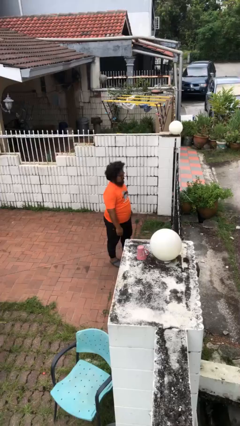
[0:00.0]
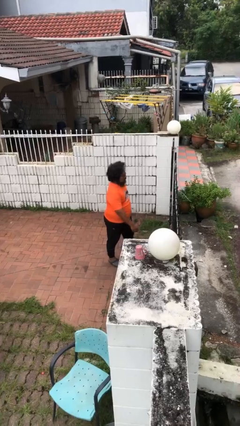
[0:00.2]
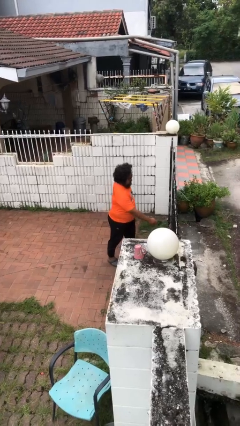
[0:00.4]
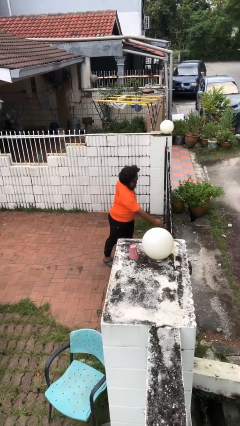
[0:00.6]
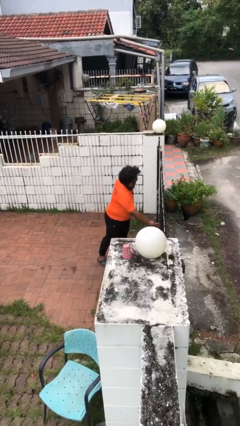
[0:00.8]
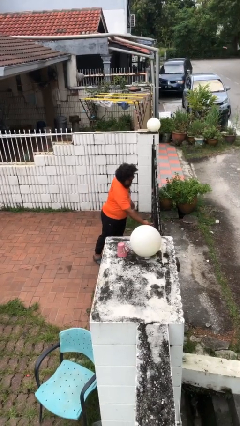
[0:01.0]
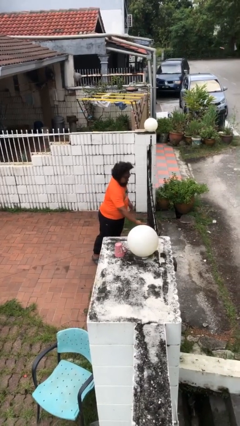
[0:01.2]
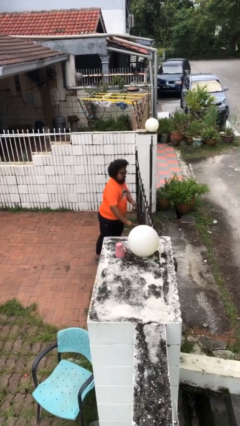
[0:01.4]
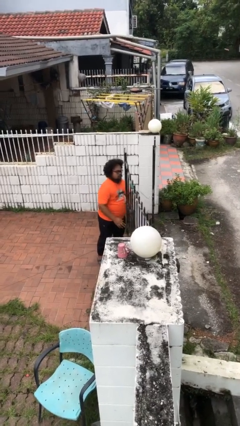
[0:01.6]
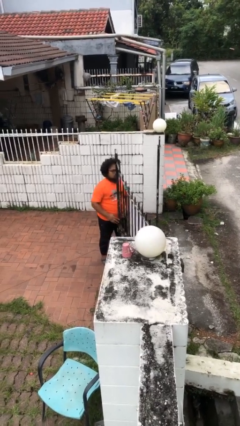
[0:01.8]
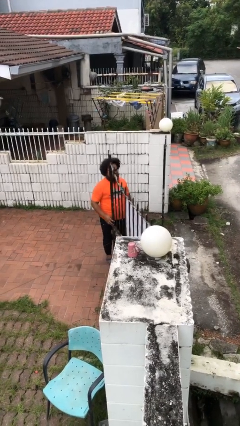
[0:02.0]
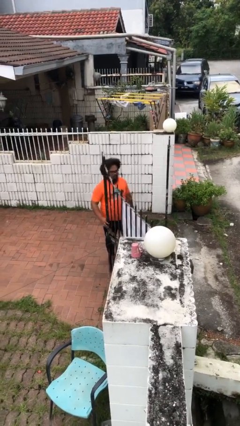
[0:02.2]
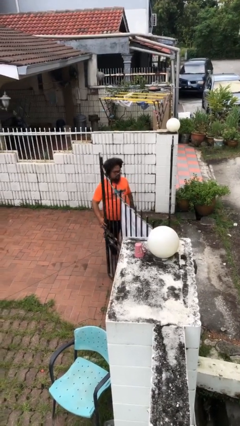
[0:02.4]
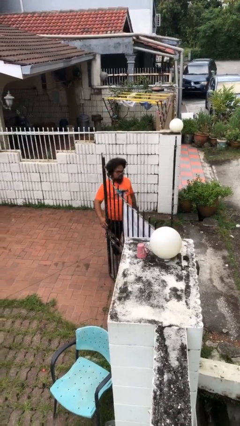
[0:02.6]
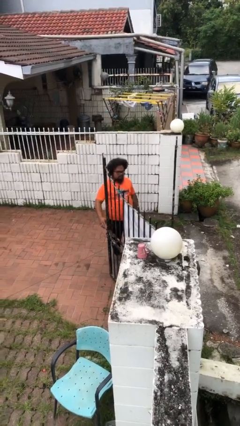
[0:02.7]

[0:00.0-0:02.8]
person opens facility door

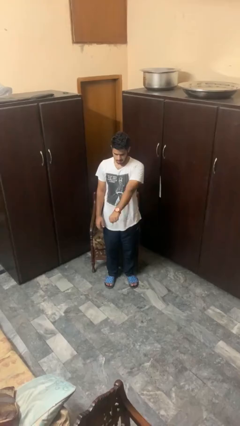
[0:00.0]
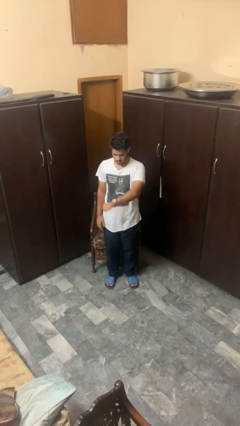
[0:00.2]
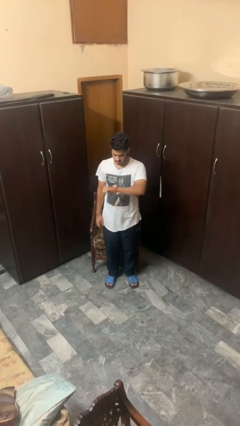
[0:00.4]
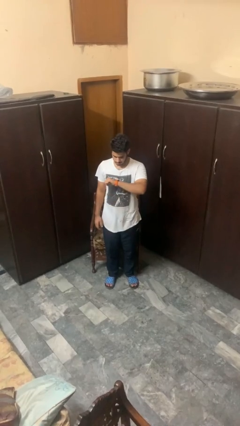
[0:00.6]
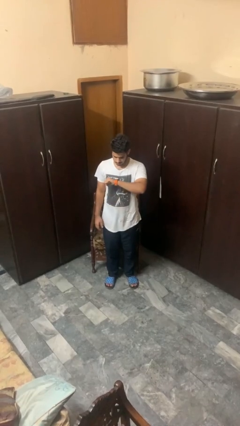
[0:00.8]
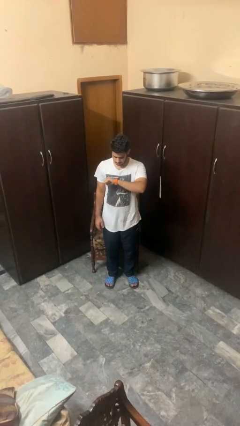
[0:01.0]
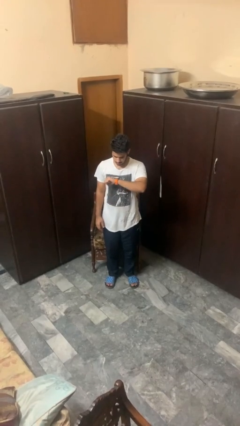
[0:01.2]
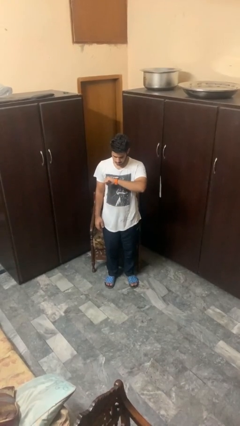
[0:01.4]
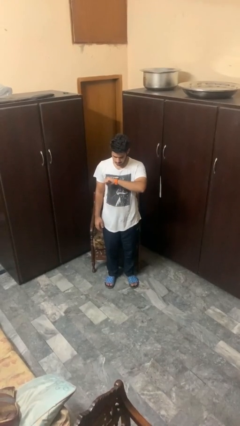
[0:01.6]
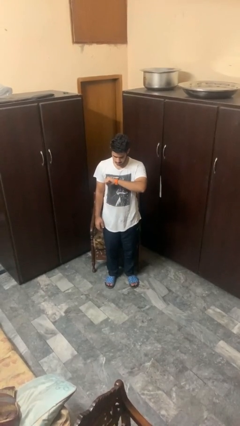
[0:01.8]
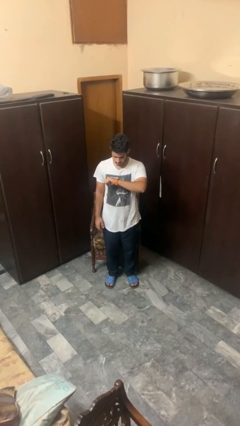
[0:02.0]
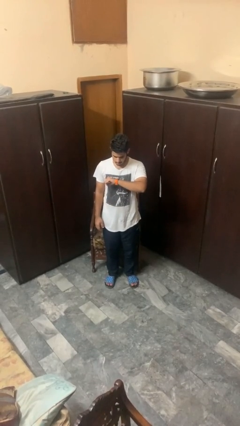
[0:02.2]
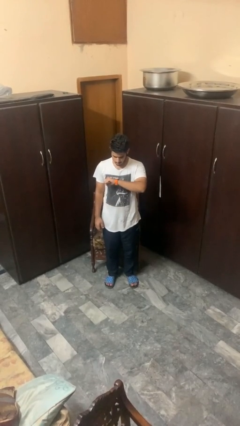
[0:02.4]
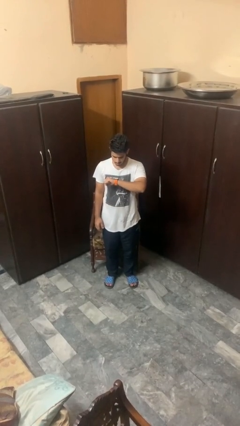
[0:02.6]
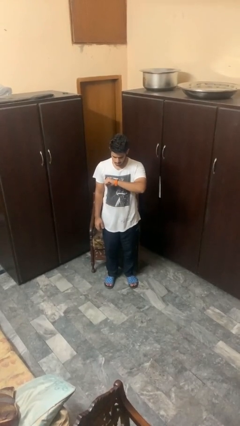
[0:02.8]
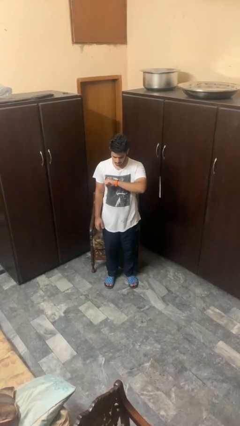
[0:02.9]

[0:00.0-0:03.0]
person looks at wristwatch

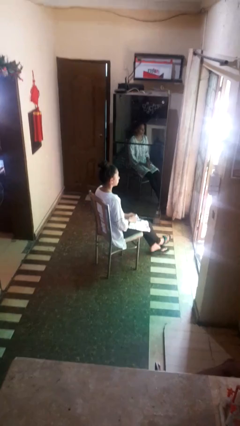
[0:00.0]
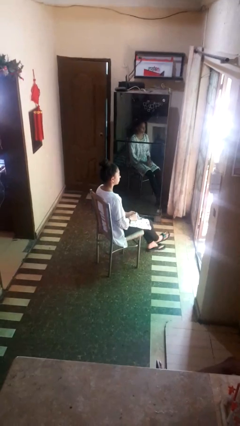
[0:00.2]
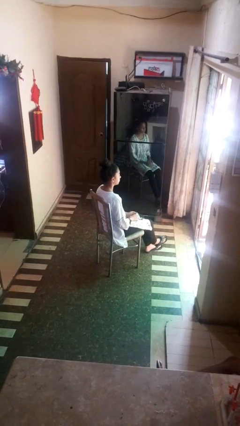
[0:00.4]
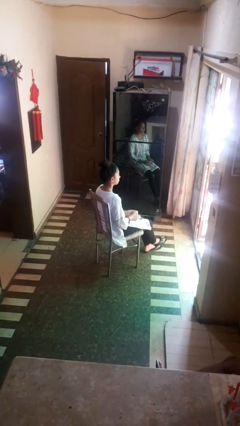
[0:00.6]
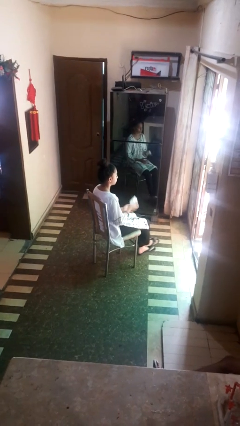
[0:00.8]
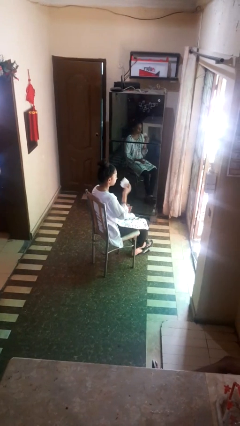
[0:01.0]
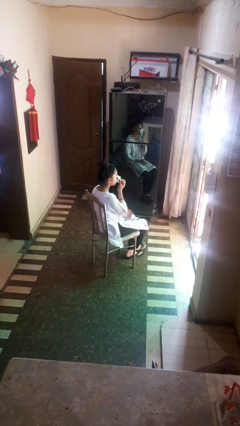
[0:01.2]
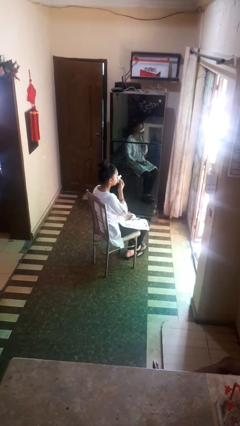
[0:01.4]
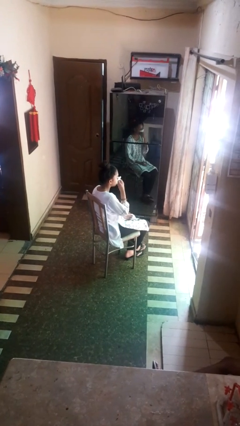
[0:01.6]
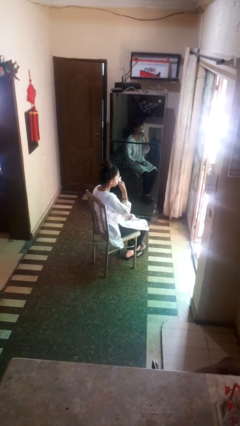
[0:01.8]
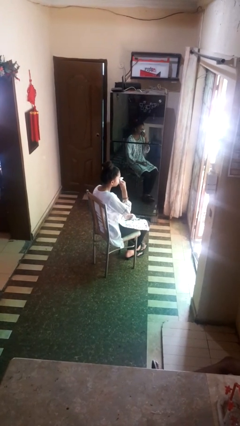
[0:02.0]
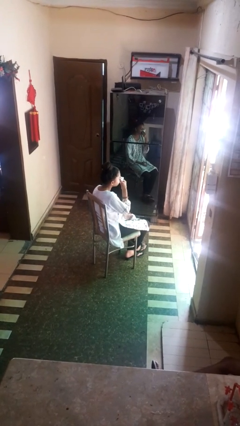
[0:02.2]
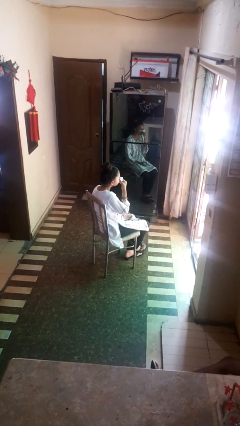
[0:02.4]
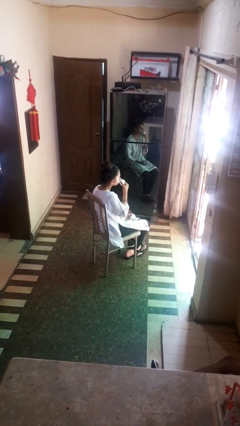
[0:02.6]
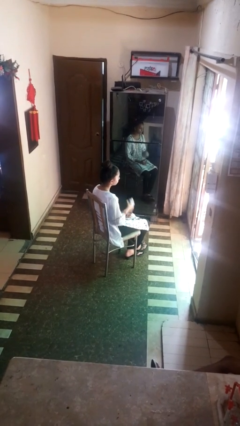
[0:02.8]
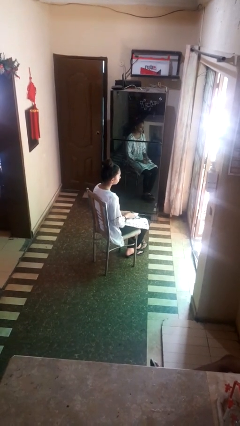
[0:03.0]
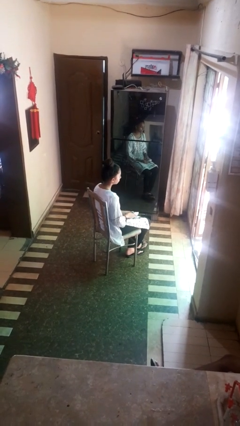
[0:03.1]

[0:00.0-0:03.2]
person blows nose

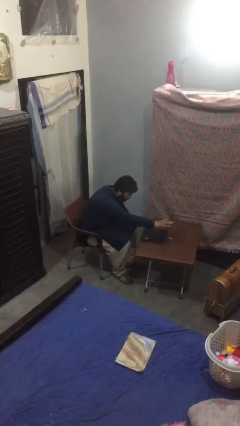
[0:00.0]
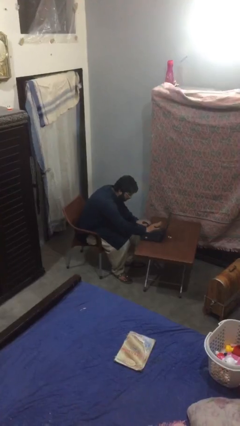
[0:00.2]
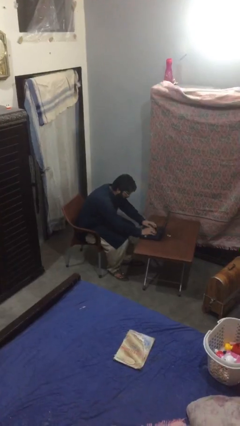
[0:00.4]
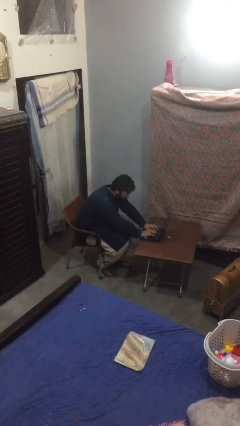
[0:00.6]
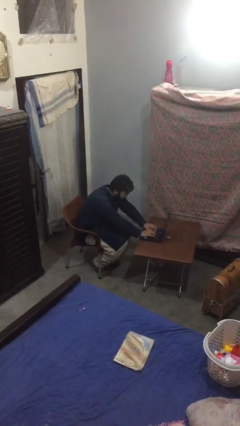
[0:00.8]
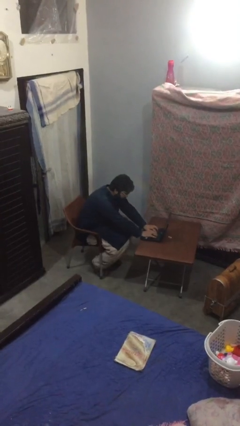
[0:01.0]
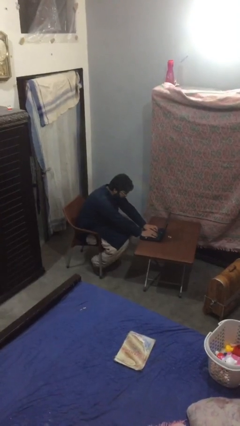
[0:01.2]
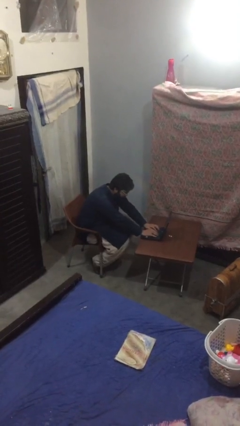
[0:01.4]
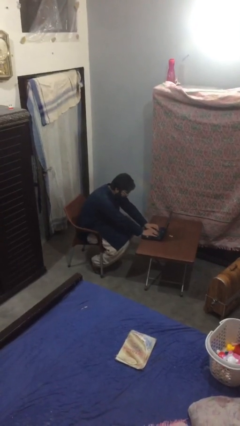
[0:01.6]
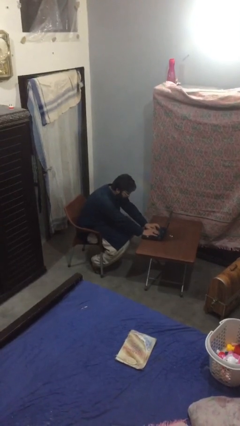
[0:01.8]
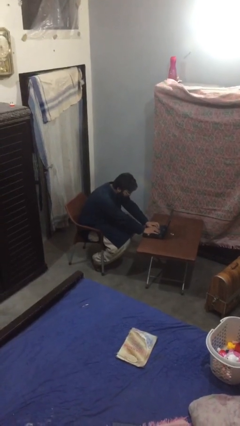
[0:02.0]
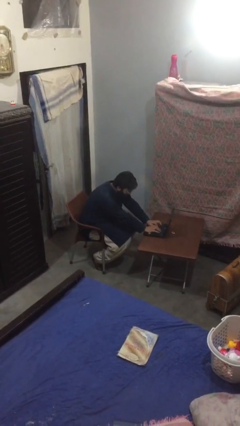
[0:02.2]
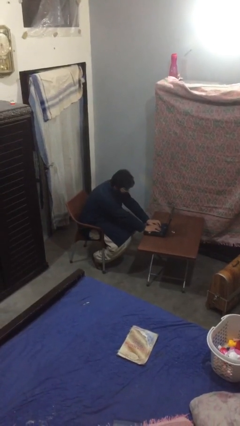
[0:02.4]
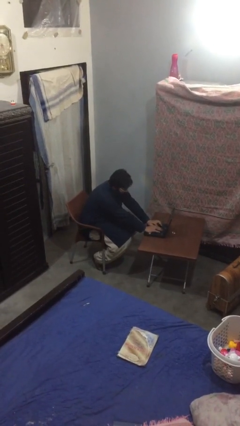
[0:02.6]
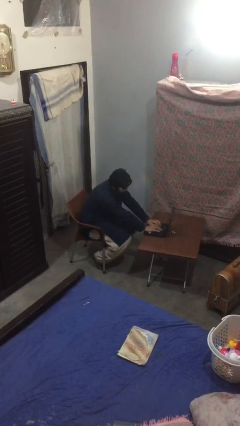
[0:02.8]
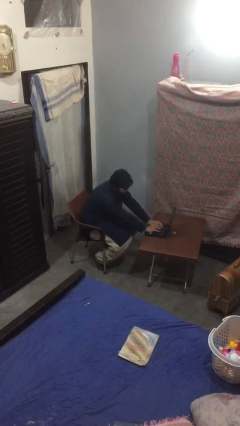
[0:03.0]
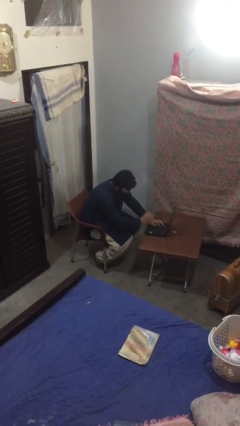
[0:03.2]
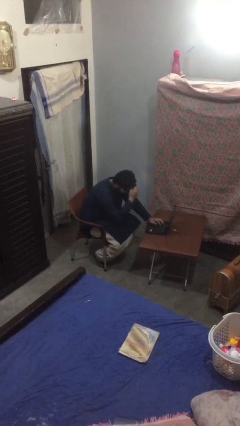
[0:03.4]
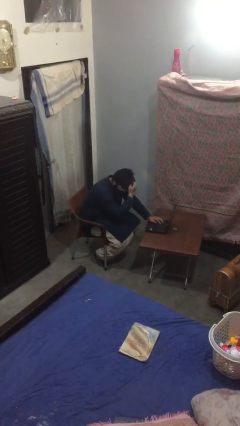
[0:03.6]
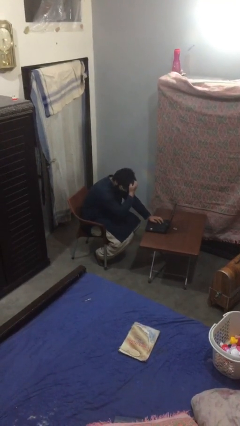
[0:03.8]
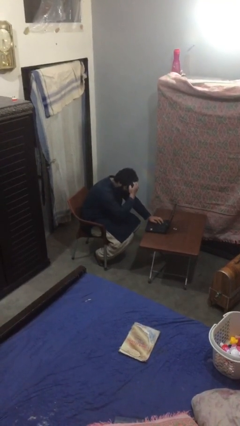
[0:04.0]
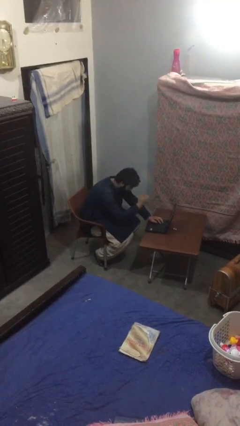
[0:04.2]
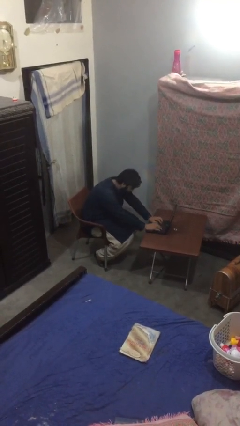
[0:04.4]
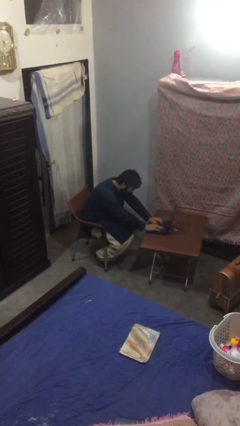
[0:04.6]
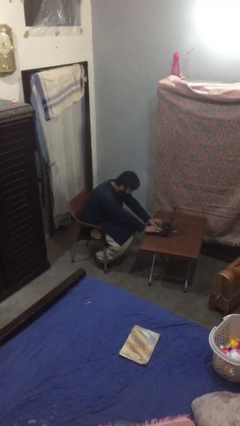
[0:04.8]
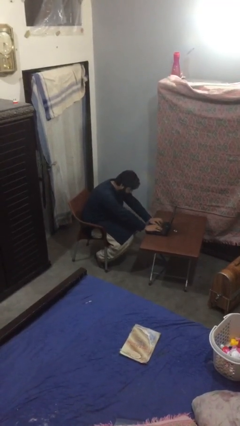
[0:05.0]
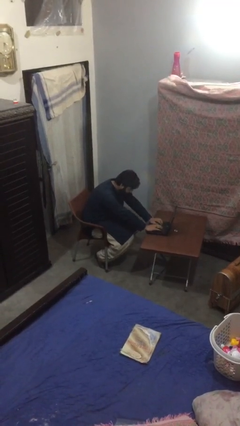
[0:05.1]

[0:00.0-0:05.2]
person interacts with laptop

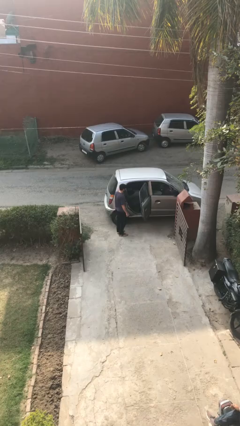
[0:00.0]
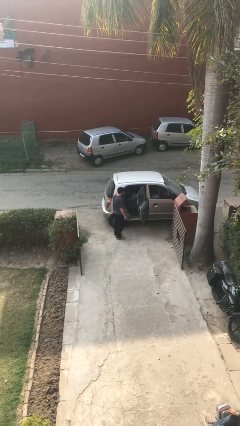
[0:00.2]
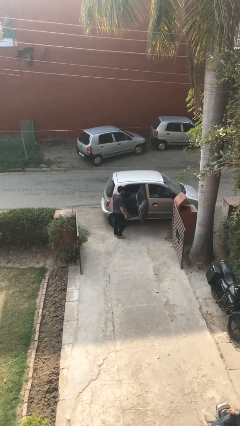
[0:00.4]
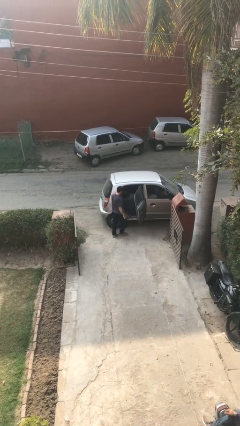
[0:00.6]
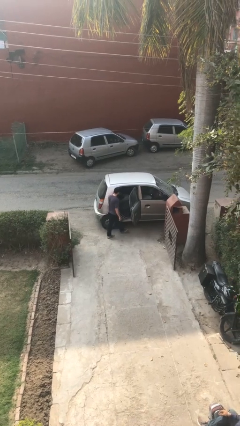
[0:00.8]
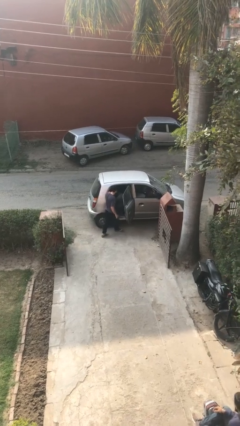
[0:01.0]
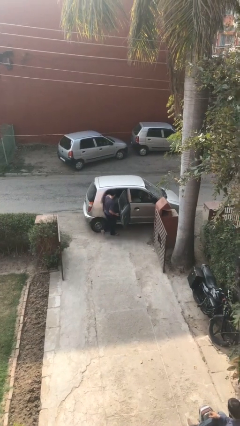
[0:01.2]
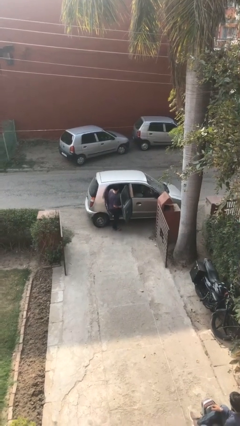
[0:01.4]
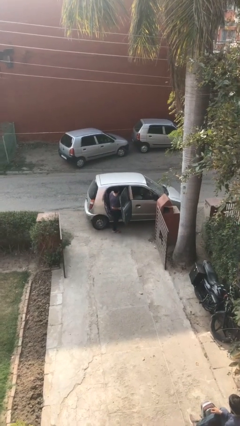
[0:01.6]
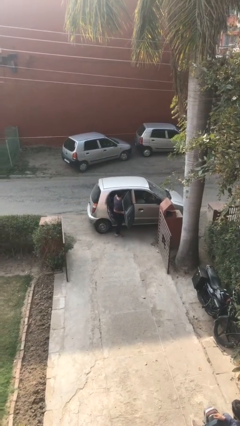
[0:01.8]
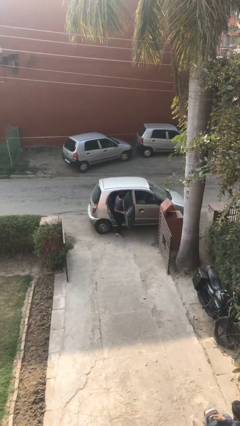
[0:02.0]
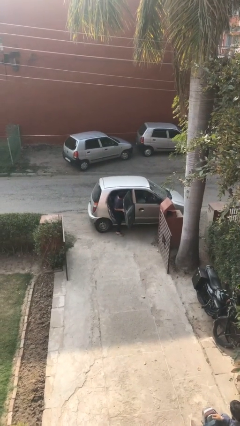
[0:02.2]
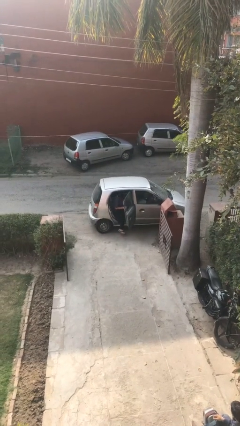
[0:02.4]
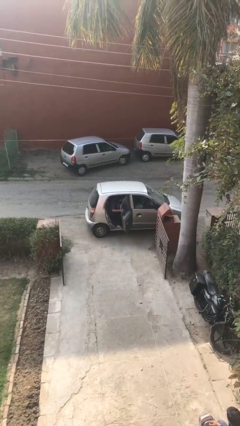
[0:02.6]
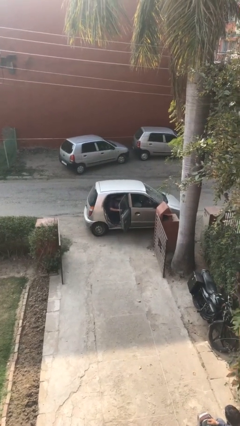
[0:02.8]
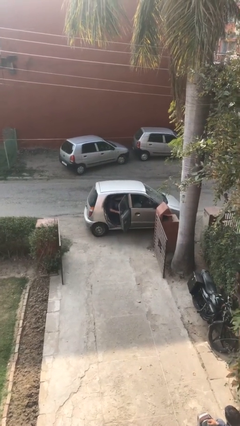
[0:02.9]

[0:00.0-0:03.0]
person enters car

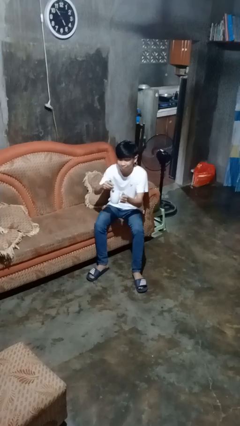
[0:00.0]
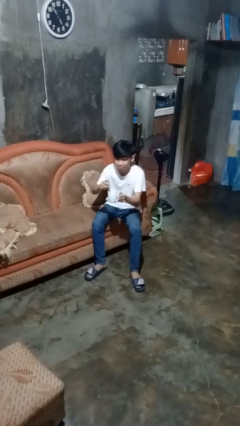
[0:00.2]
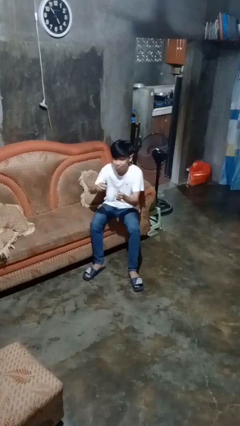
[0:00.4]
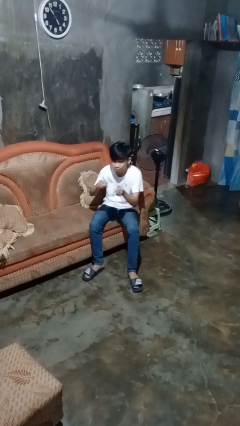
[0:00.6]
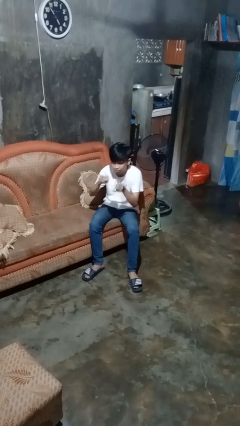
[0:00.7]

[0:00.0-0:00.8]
person drinks from mug
